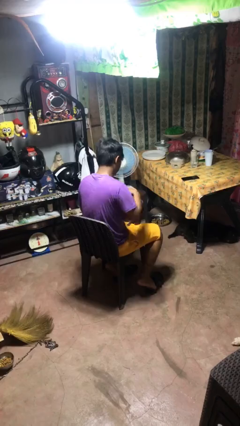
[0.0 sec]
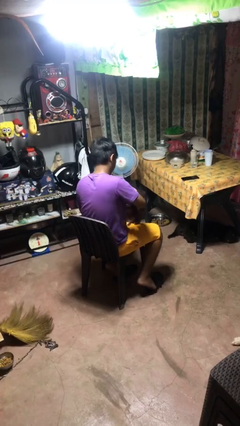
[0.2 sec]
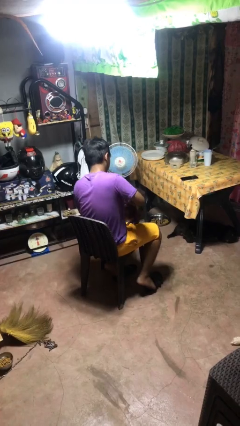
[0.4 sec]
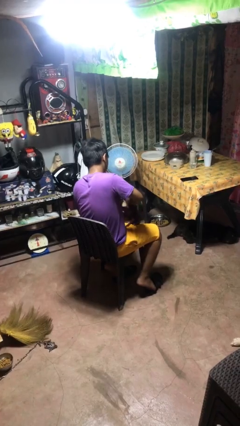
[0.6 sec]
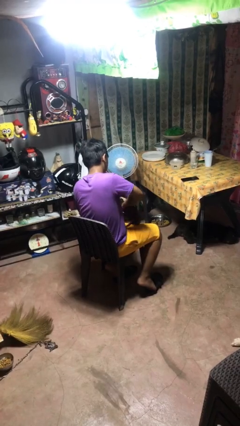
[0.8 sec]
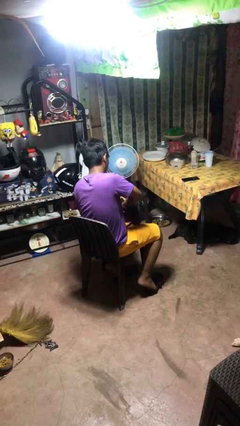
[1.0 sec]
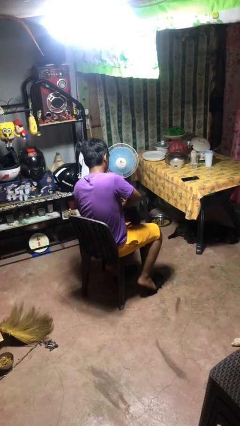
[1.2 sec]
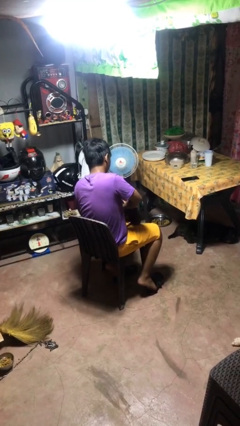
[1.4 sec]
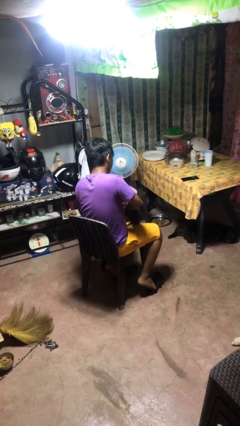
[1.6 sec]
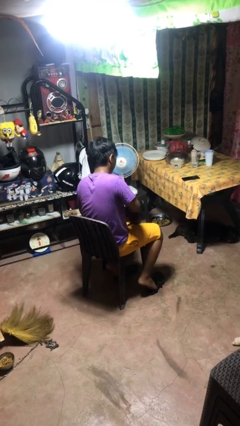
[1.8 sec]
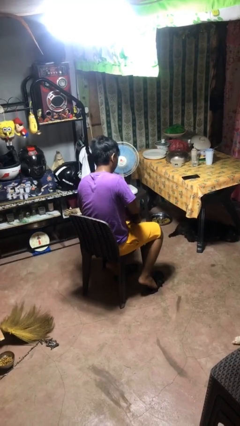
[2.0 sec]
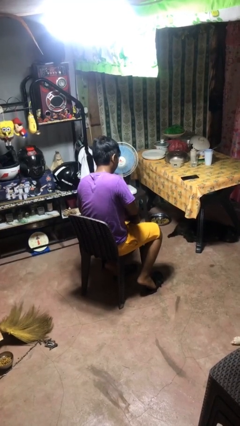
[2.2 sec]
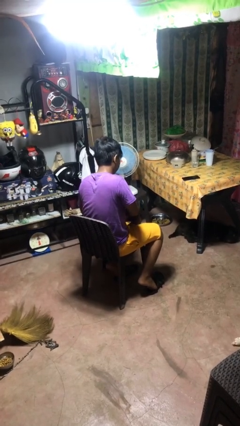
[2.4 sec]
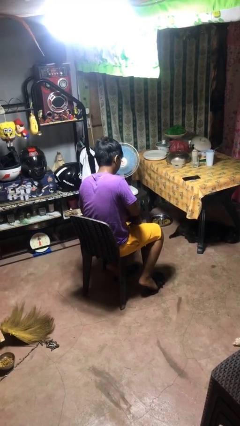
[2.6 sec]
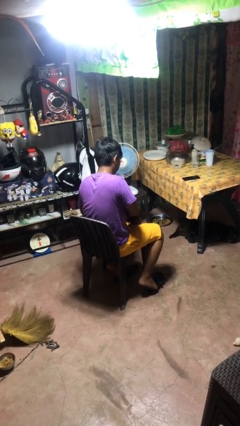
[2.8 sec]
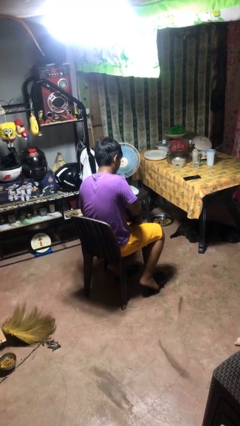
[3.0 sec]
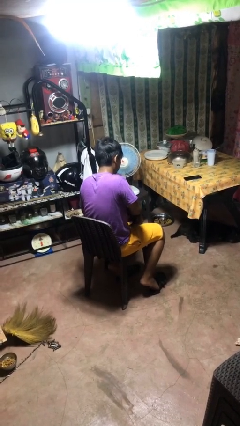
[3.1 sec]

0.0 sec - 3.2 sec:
person searches in purse

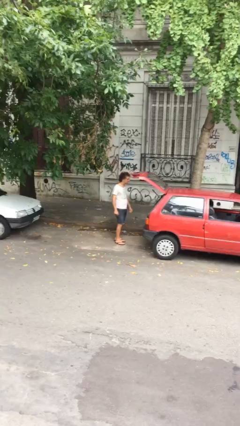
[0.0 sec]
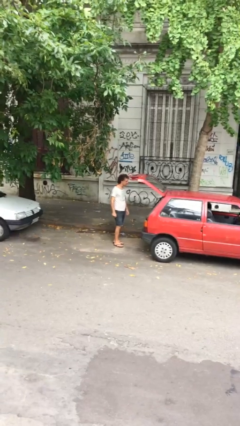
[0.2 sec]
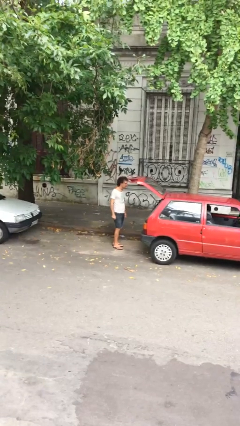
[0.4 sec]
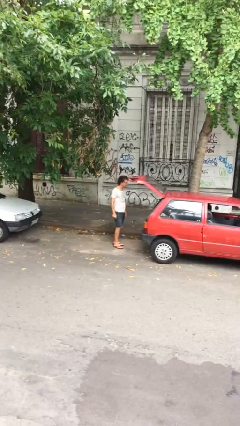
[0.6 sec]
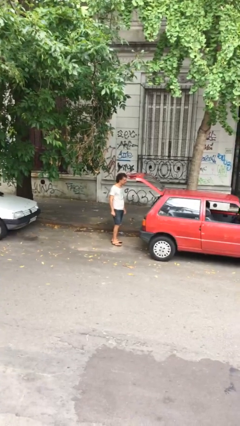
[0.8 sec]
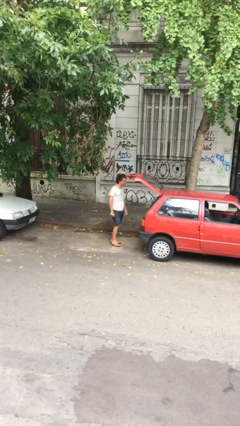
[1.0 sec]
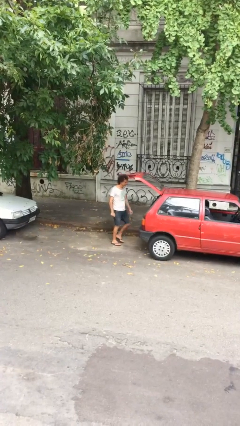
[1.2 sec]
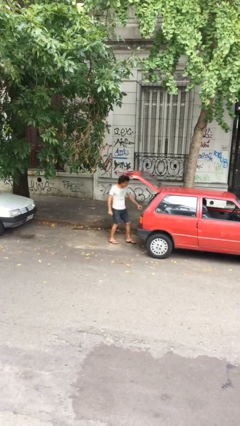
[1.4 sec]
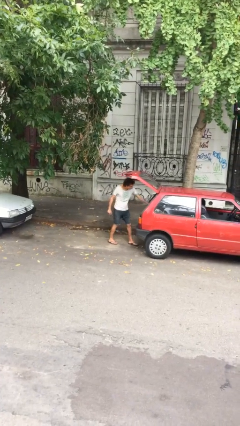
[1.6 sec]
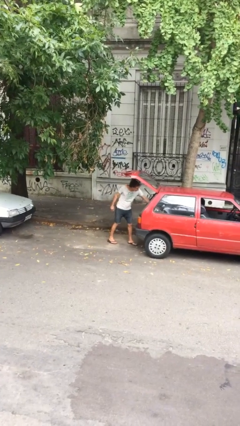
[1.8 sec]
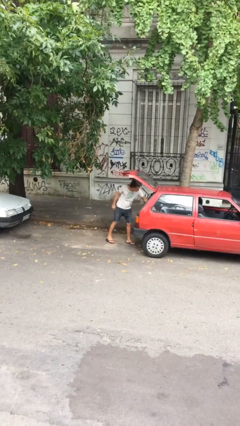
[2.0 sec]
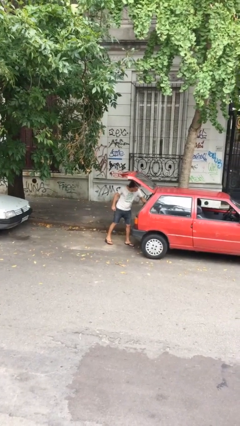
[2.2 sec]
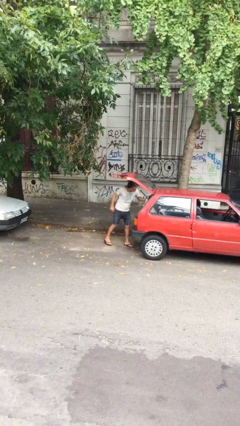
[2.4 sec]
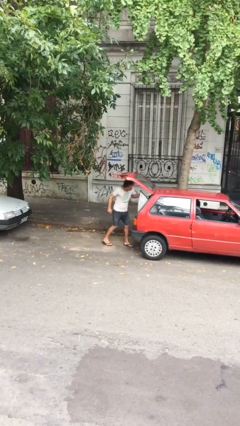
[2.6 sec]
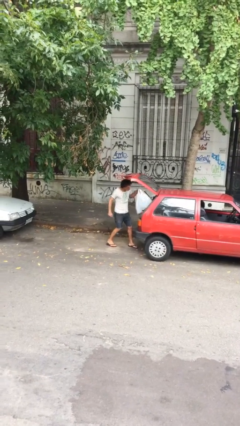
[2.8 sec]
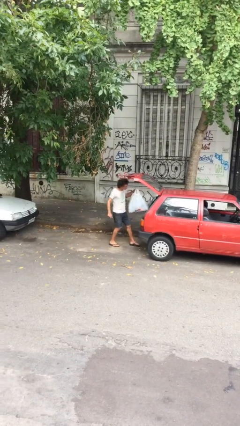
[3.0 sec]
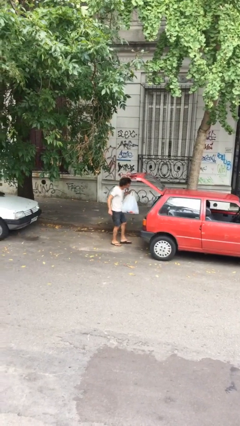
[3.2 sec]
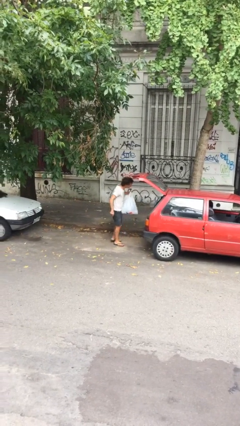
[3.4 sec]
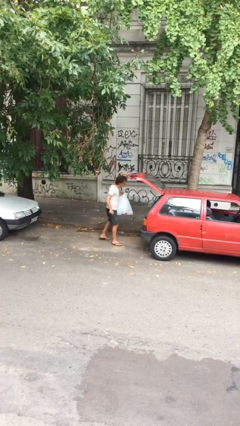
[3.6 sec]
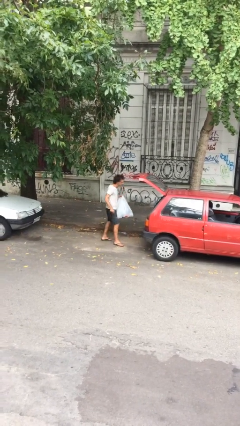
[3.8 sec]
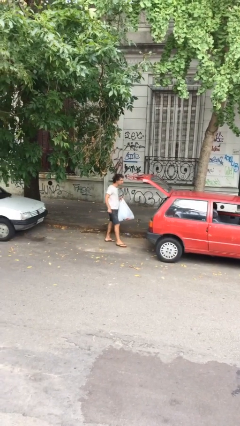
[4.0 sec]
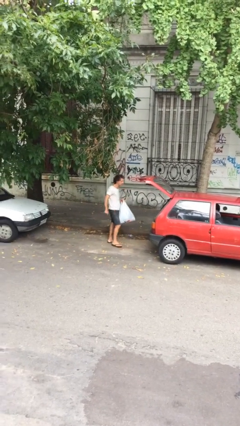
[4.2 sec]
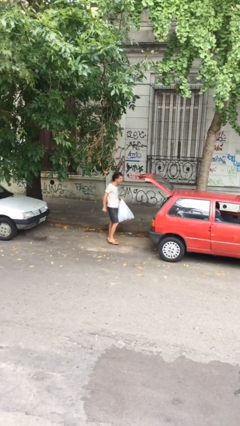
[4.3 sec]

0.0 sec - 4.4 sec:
person unloads car

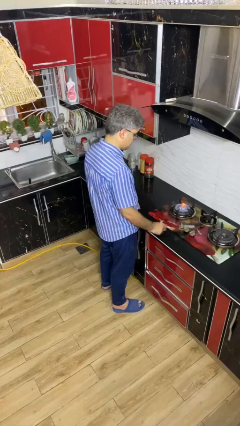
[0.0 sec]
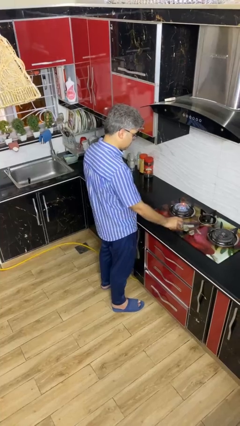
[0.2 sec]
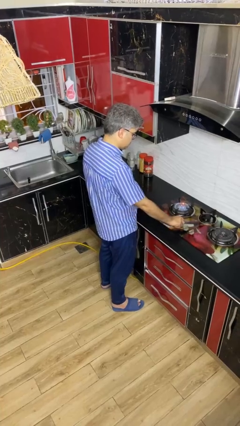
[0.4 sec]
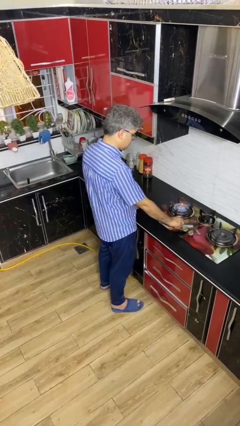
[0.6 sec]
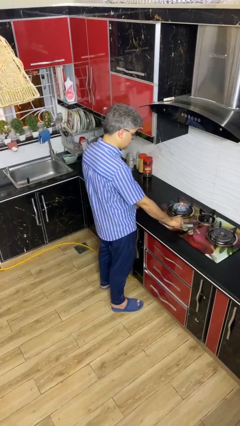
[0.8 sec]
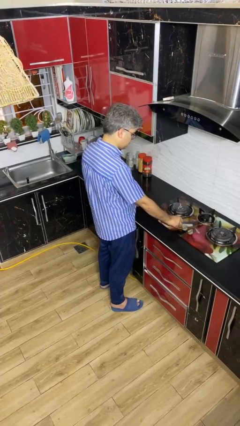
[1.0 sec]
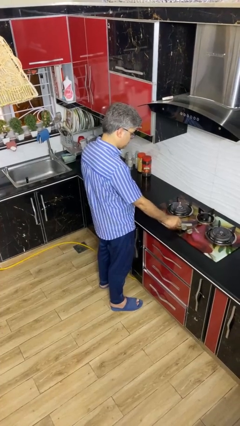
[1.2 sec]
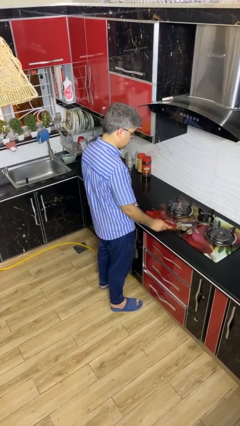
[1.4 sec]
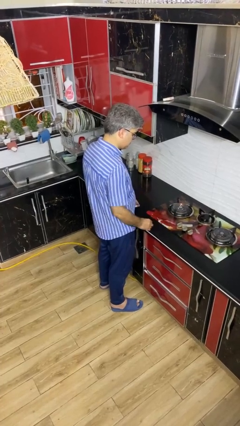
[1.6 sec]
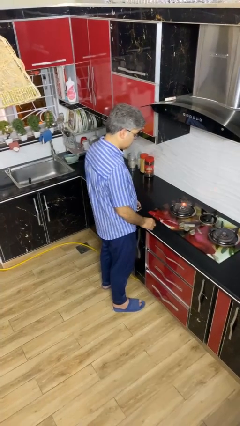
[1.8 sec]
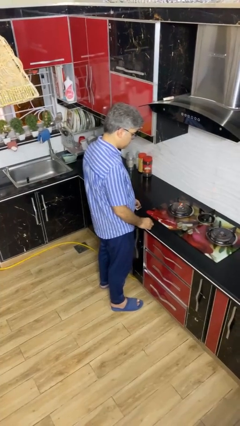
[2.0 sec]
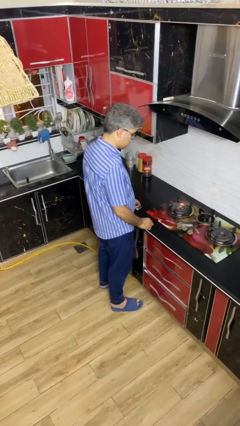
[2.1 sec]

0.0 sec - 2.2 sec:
person turns off stovetop

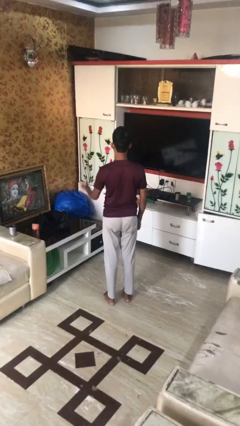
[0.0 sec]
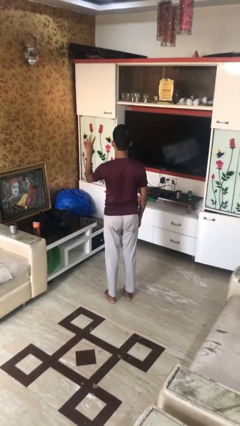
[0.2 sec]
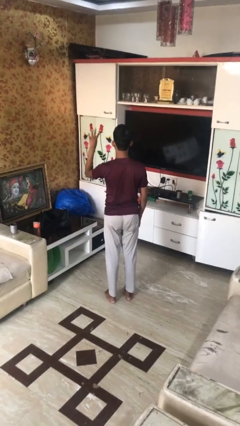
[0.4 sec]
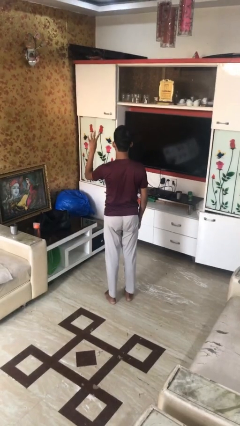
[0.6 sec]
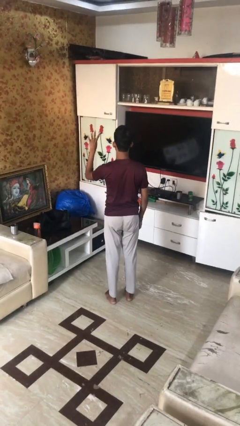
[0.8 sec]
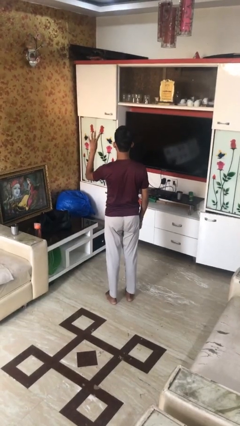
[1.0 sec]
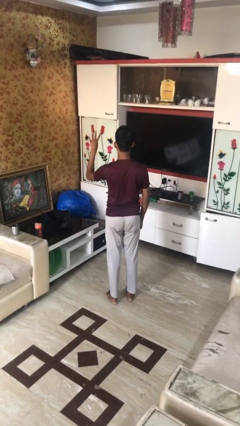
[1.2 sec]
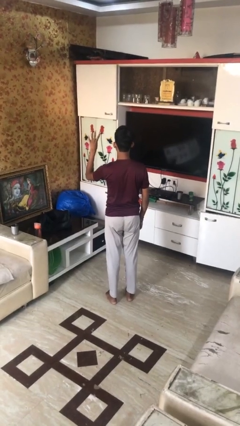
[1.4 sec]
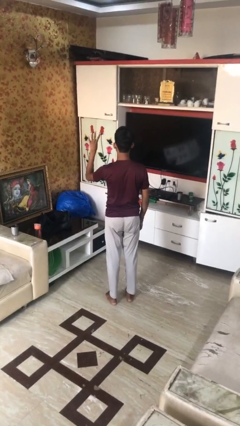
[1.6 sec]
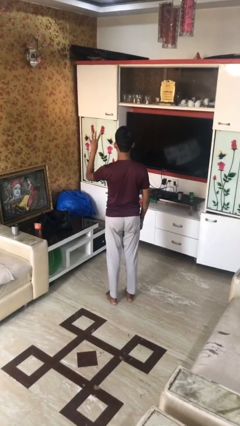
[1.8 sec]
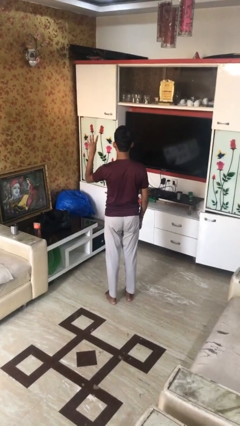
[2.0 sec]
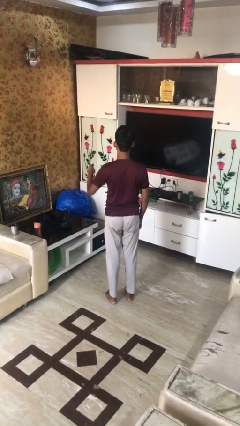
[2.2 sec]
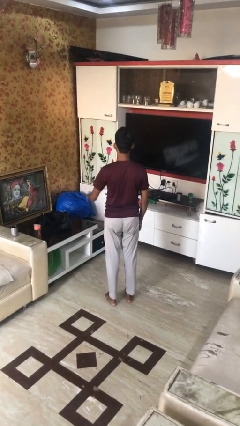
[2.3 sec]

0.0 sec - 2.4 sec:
person gestures number four

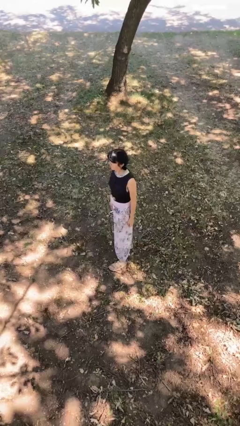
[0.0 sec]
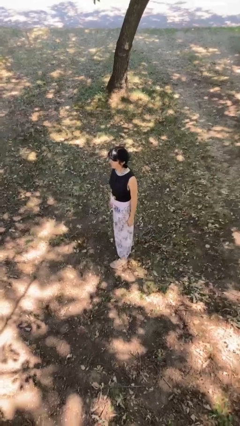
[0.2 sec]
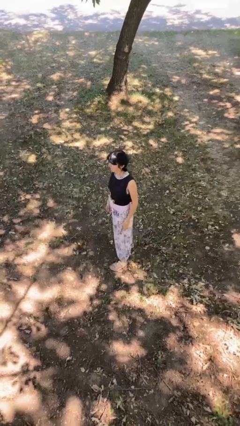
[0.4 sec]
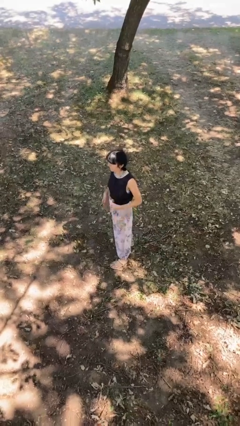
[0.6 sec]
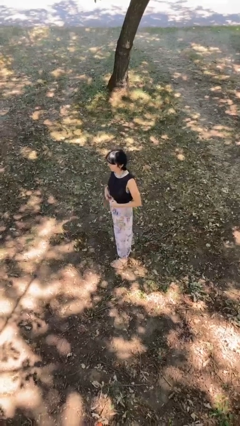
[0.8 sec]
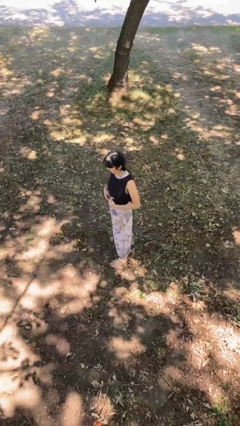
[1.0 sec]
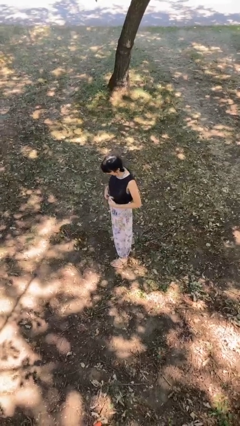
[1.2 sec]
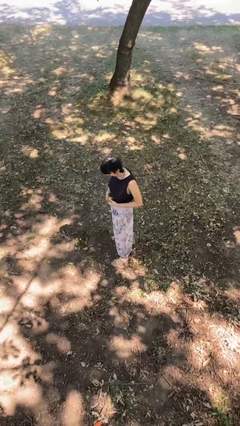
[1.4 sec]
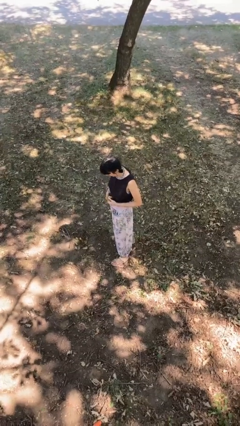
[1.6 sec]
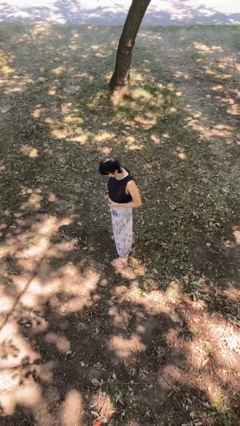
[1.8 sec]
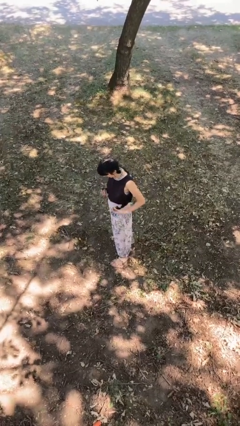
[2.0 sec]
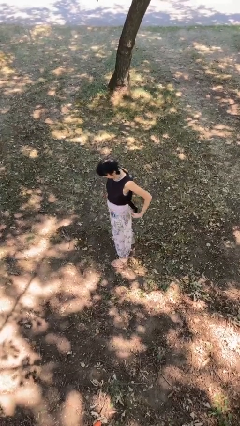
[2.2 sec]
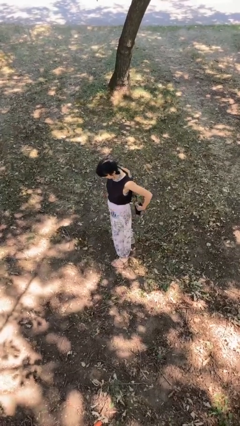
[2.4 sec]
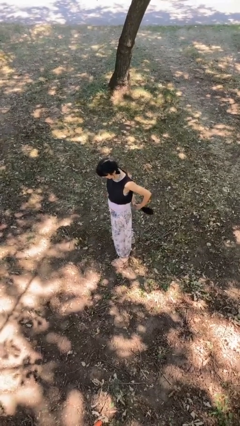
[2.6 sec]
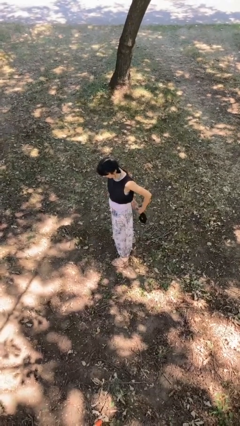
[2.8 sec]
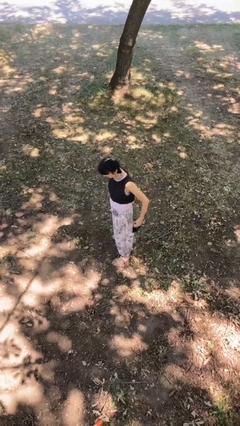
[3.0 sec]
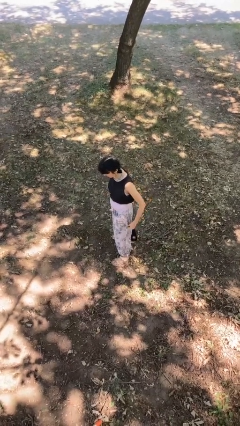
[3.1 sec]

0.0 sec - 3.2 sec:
person takes off belt

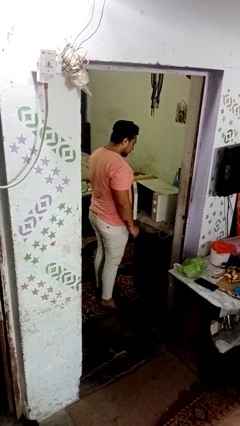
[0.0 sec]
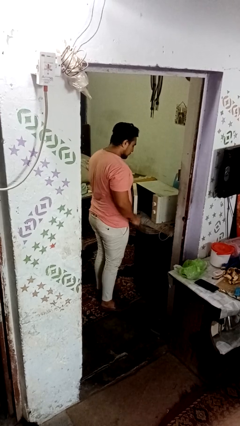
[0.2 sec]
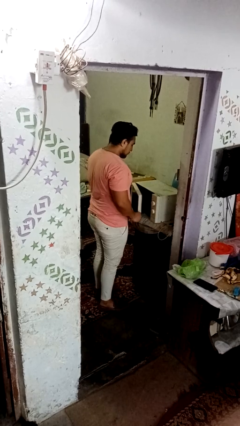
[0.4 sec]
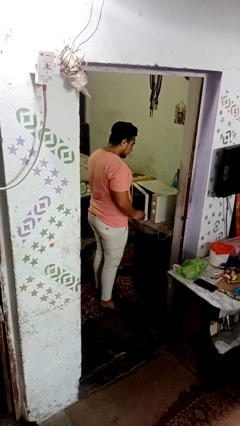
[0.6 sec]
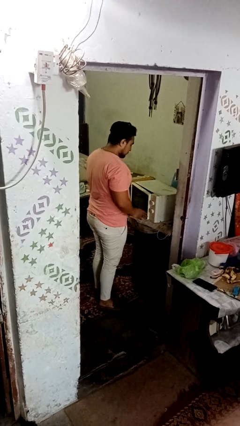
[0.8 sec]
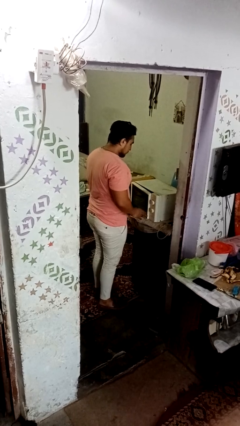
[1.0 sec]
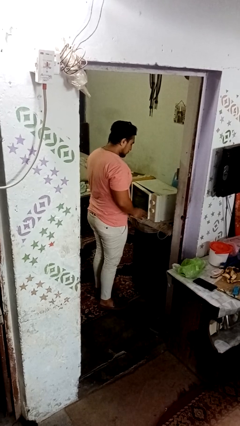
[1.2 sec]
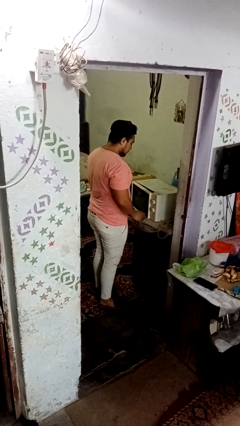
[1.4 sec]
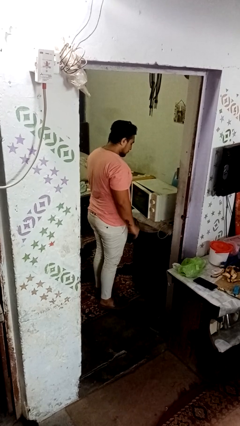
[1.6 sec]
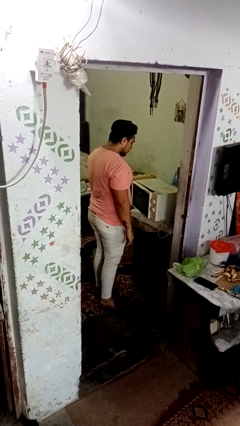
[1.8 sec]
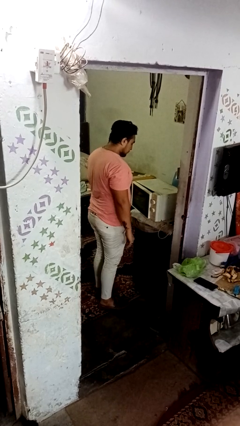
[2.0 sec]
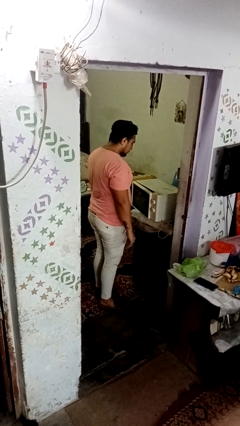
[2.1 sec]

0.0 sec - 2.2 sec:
person closes dishwasher
